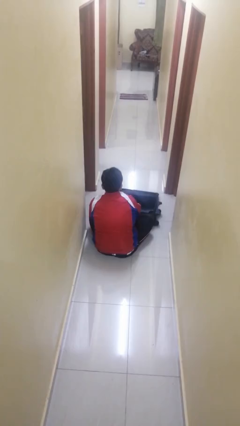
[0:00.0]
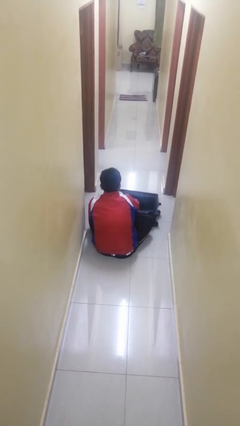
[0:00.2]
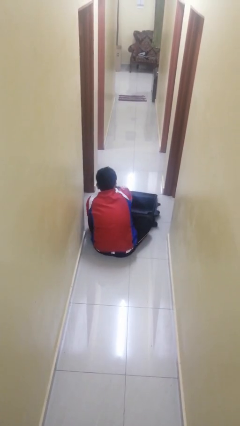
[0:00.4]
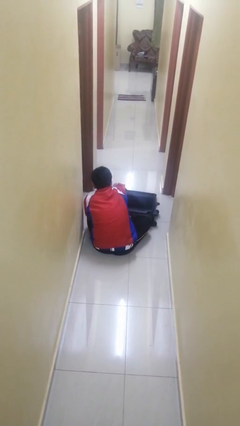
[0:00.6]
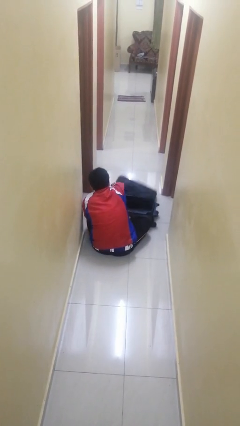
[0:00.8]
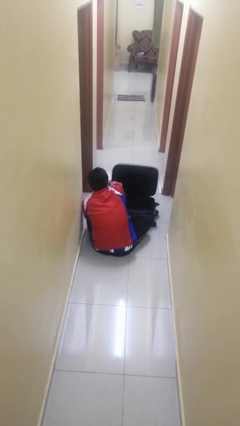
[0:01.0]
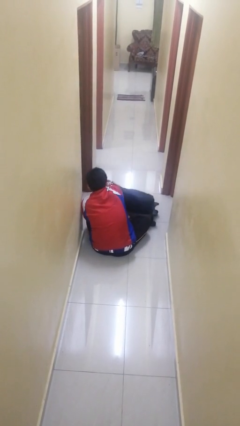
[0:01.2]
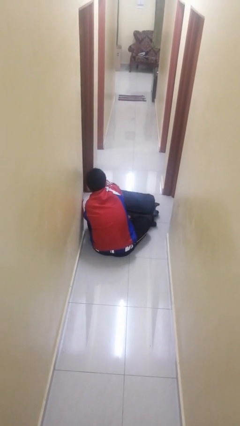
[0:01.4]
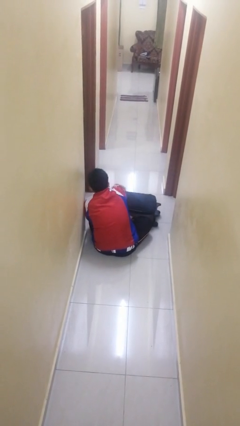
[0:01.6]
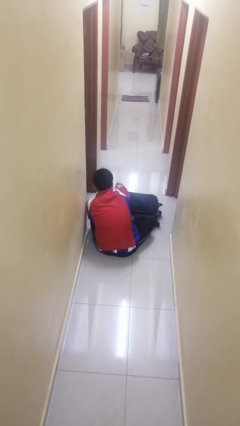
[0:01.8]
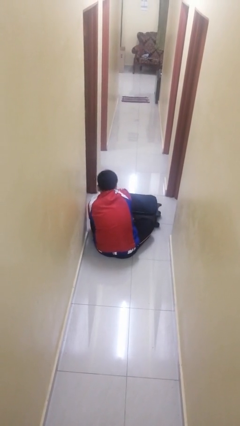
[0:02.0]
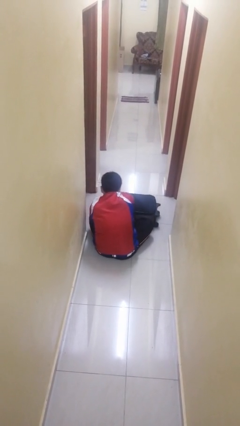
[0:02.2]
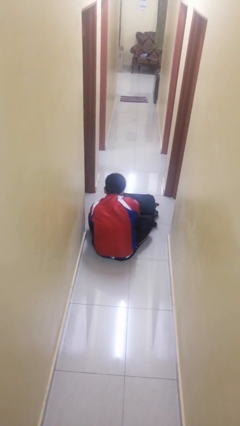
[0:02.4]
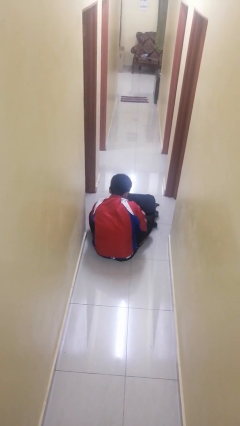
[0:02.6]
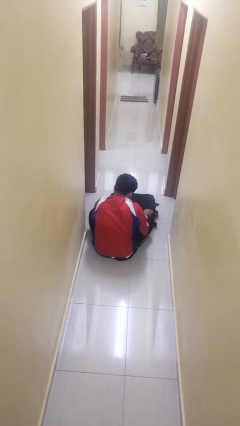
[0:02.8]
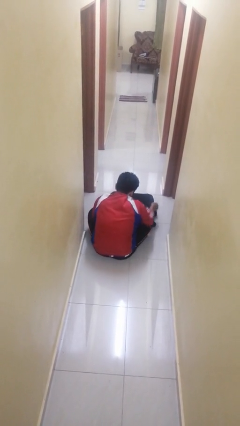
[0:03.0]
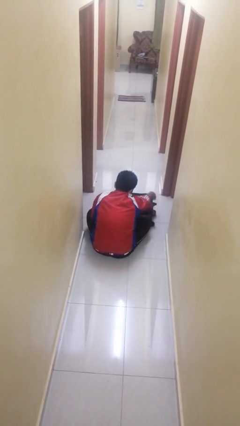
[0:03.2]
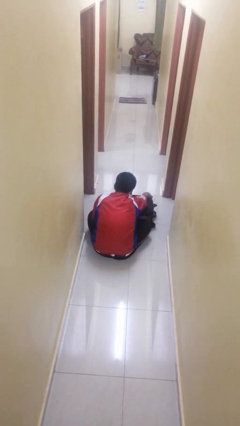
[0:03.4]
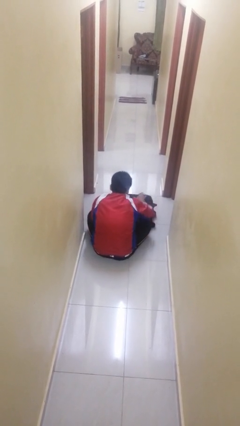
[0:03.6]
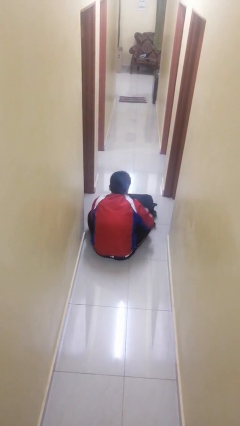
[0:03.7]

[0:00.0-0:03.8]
person closes suitcase

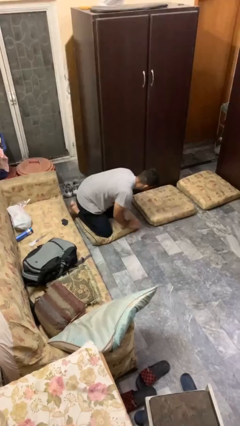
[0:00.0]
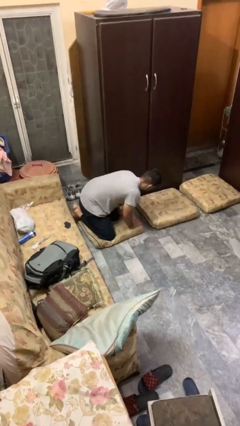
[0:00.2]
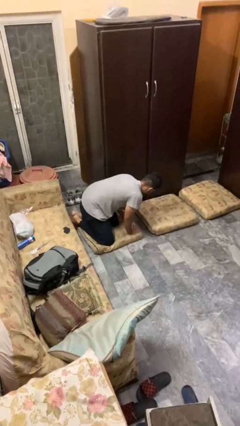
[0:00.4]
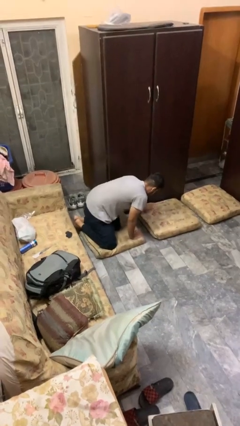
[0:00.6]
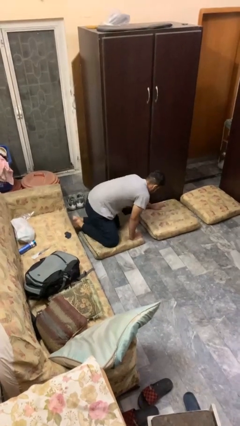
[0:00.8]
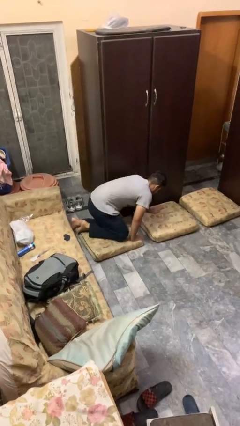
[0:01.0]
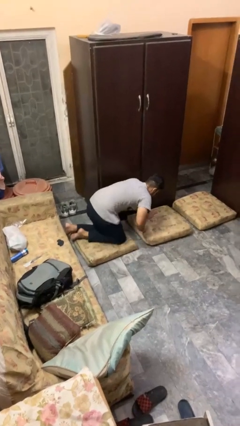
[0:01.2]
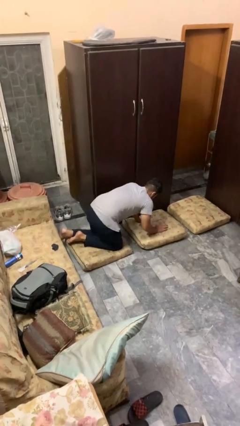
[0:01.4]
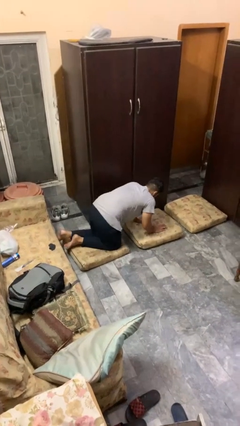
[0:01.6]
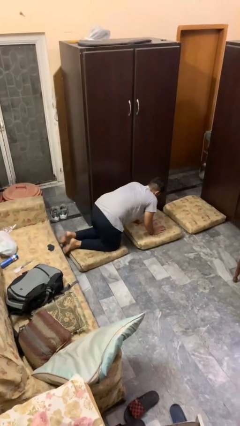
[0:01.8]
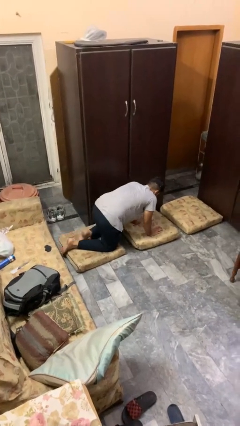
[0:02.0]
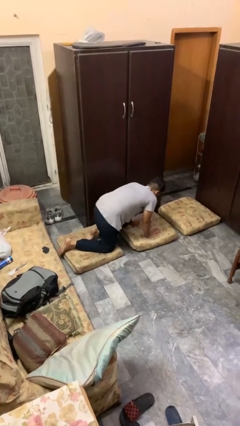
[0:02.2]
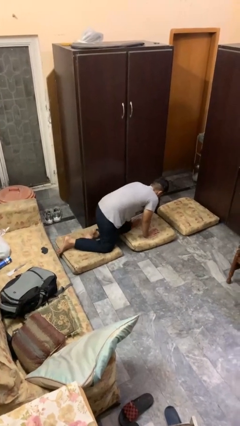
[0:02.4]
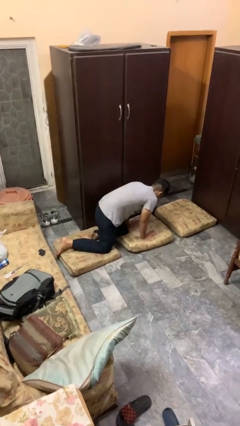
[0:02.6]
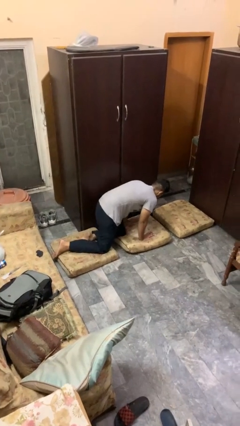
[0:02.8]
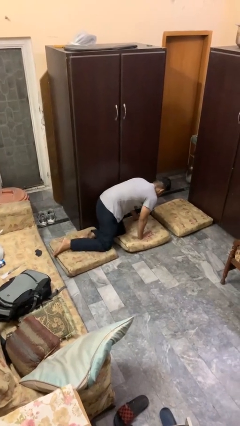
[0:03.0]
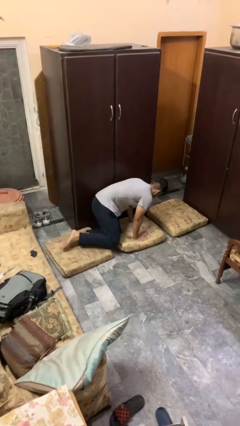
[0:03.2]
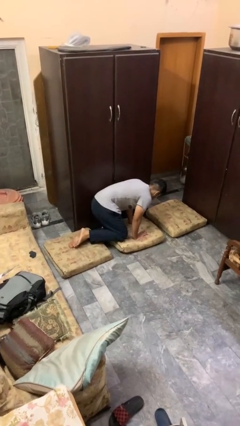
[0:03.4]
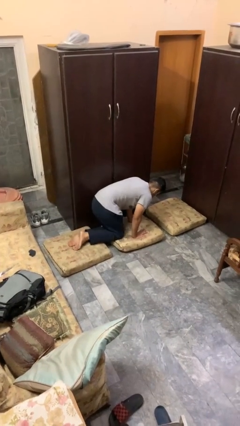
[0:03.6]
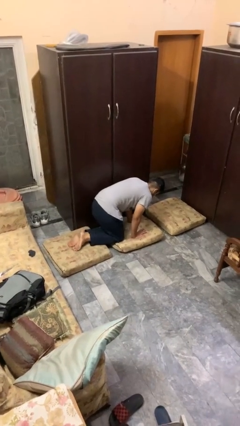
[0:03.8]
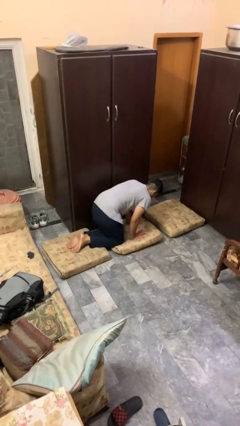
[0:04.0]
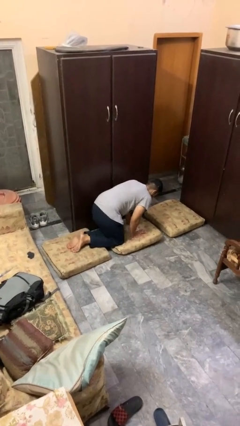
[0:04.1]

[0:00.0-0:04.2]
person crawls

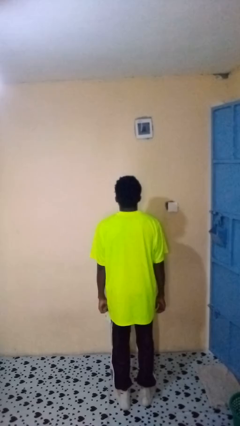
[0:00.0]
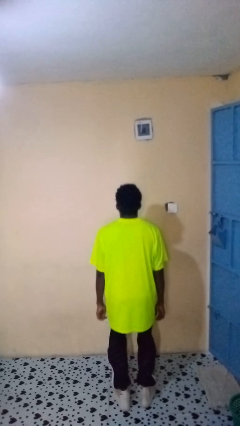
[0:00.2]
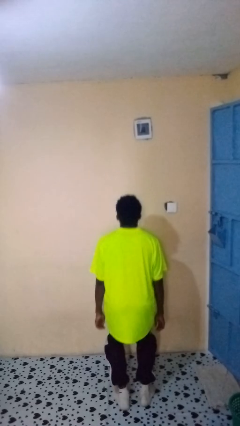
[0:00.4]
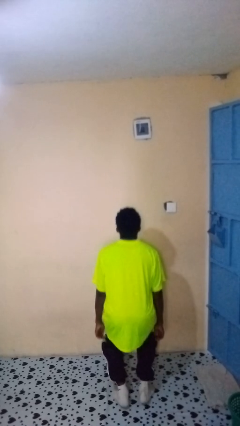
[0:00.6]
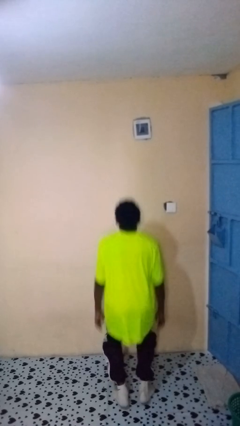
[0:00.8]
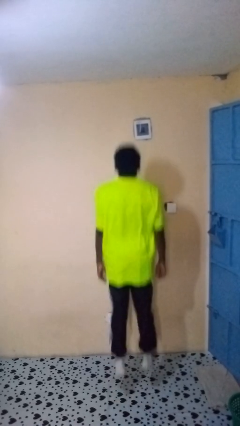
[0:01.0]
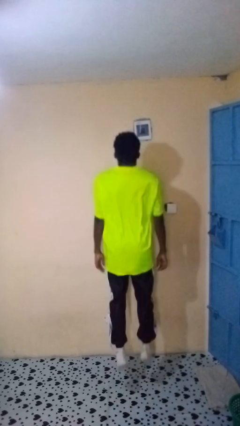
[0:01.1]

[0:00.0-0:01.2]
person jumps

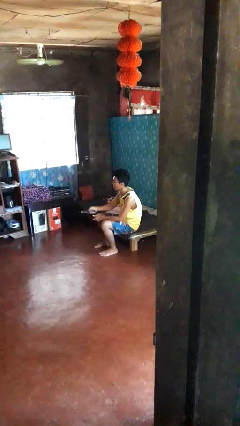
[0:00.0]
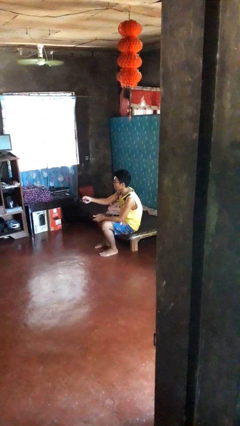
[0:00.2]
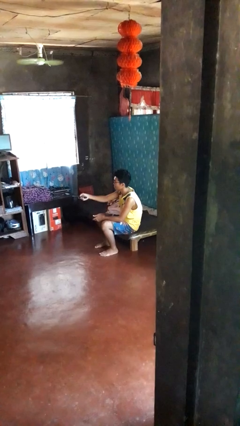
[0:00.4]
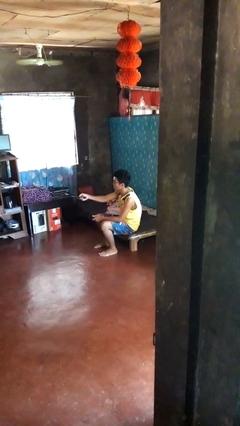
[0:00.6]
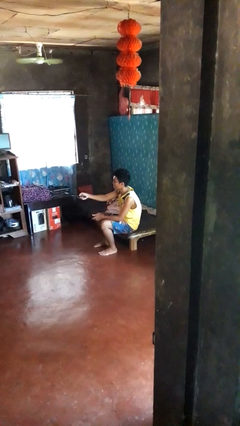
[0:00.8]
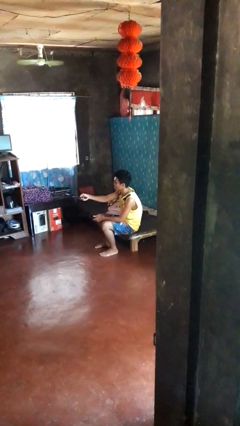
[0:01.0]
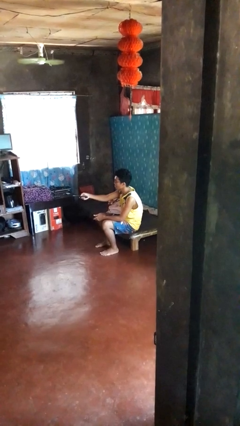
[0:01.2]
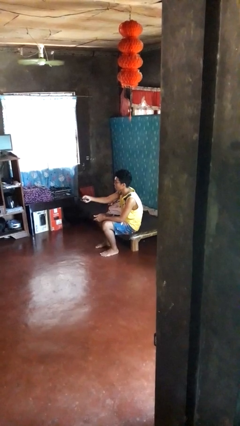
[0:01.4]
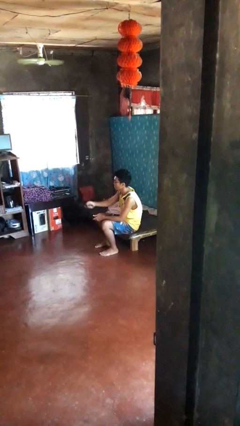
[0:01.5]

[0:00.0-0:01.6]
person uses television remote

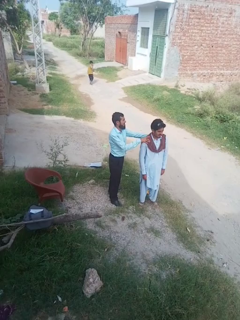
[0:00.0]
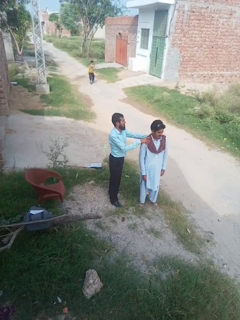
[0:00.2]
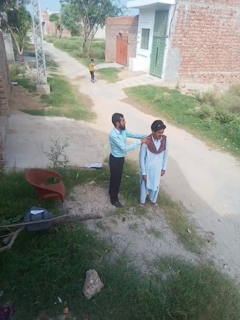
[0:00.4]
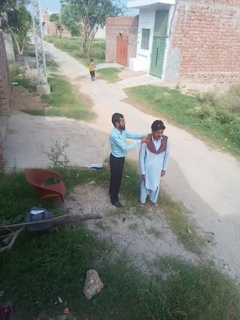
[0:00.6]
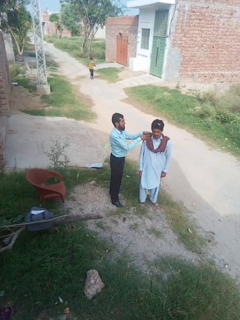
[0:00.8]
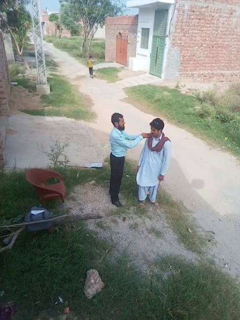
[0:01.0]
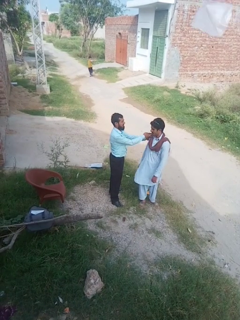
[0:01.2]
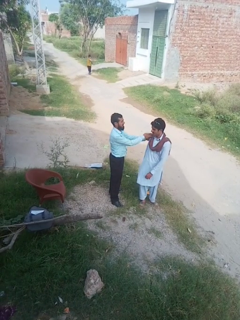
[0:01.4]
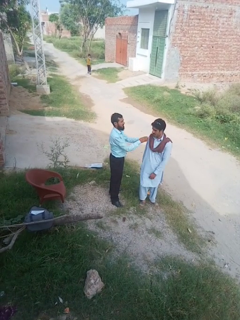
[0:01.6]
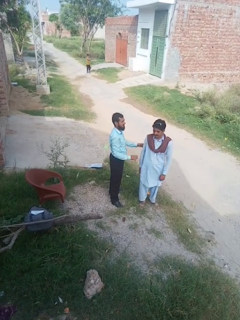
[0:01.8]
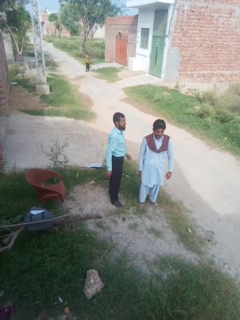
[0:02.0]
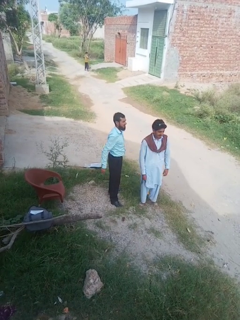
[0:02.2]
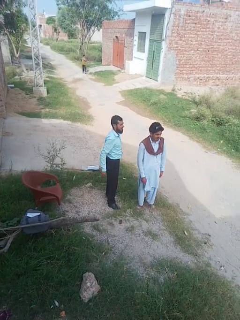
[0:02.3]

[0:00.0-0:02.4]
person spins person around

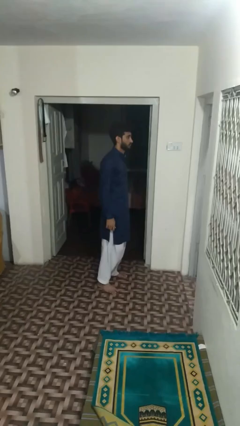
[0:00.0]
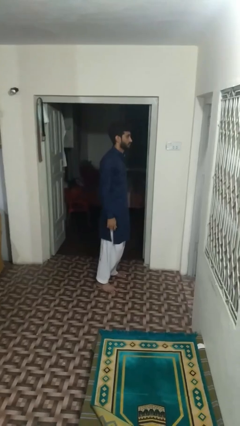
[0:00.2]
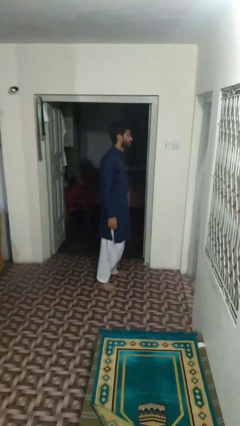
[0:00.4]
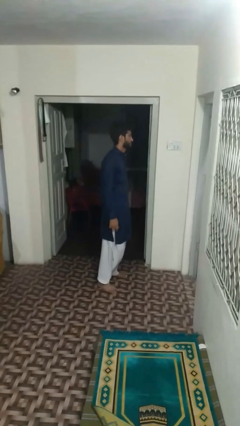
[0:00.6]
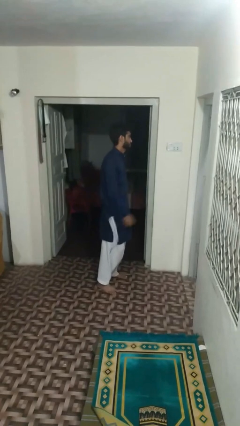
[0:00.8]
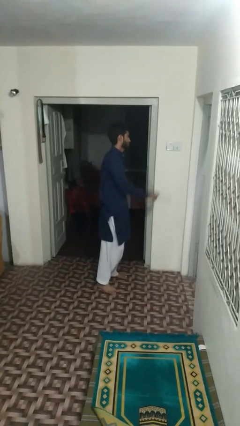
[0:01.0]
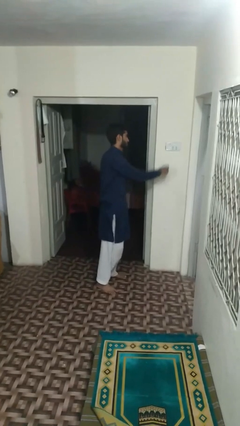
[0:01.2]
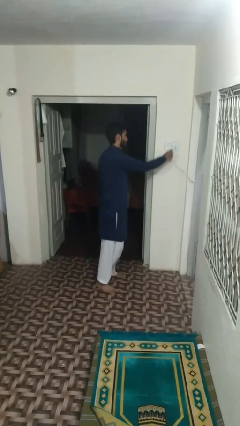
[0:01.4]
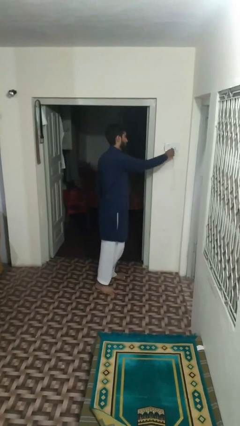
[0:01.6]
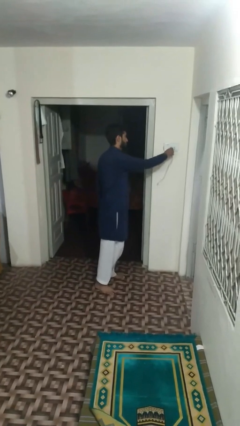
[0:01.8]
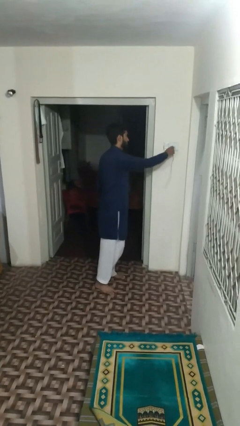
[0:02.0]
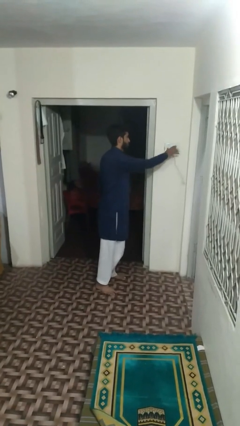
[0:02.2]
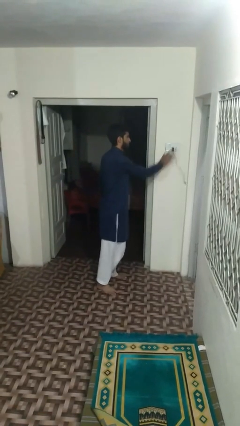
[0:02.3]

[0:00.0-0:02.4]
person plugs into electrical socket

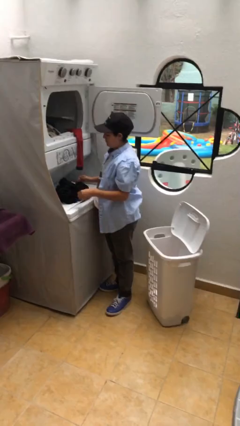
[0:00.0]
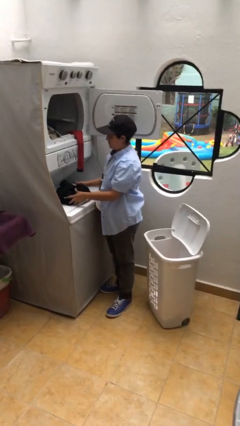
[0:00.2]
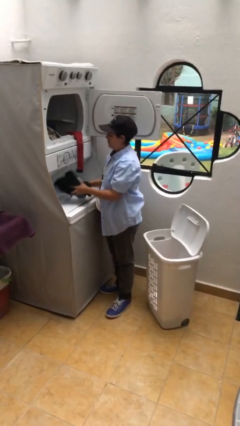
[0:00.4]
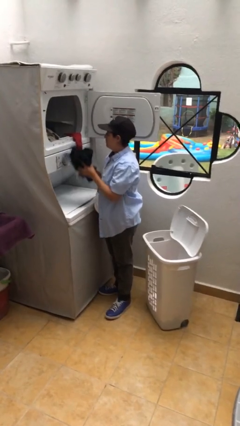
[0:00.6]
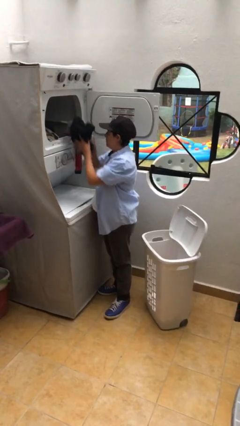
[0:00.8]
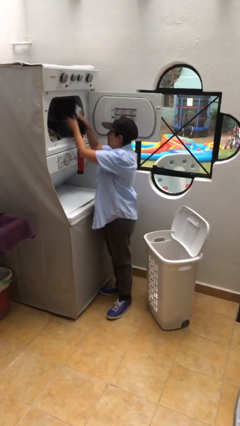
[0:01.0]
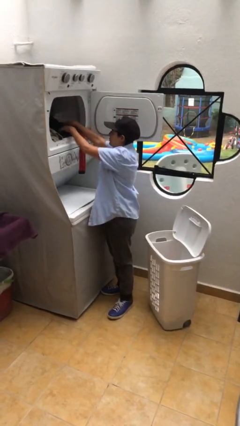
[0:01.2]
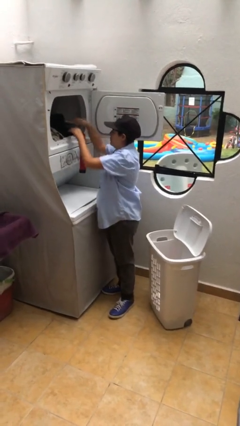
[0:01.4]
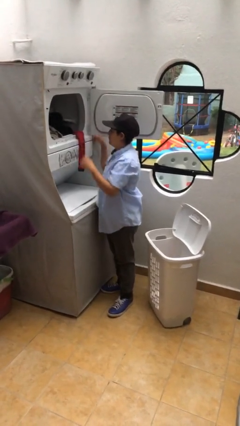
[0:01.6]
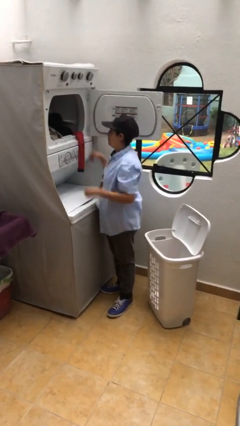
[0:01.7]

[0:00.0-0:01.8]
person loads dryer

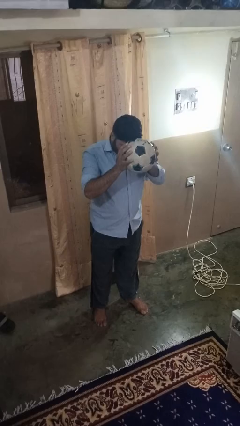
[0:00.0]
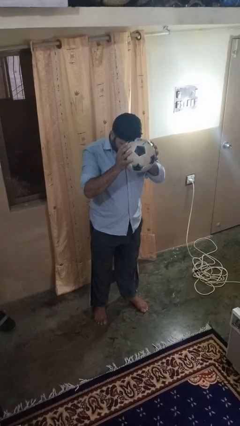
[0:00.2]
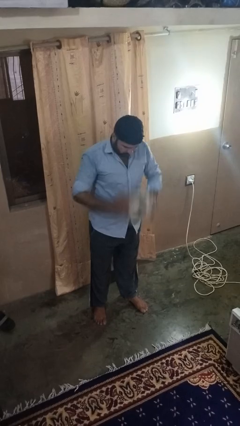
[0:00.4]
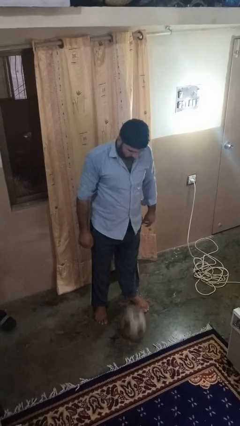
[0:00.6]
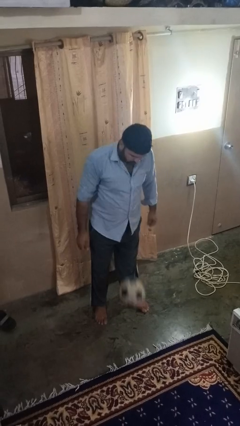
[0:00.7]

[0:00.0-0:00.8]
person bounces ball on floor
